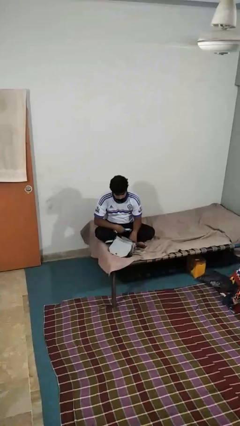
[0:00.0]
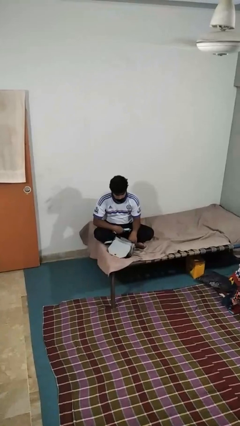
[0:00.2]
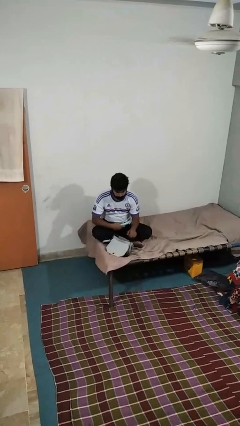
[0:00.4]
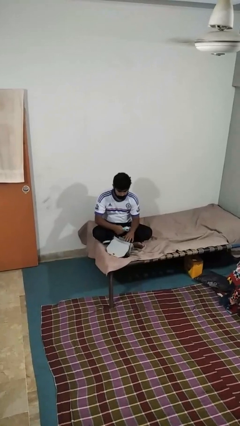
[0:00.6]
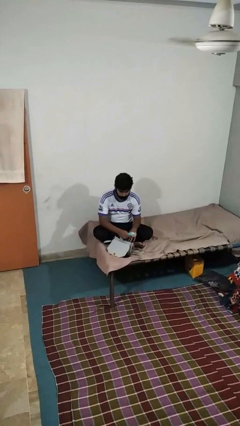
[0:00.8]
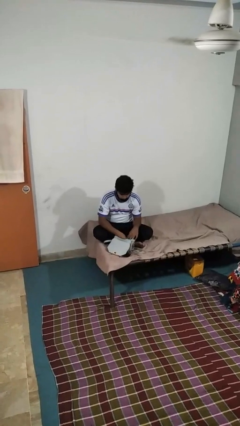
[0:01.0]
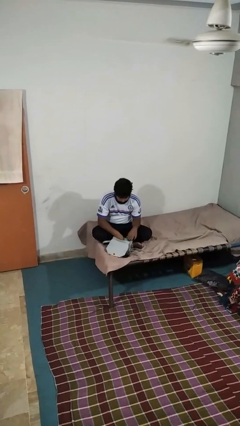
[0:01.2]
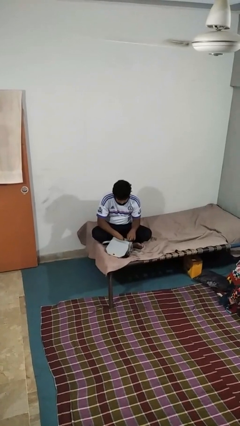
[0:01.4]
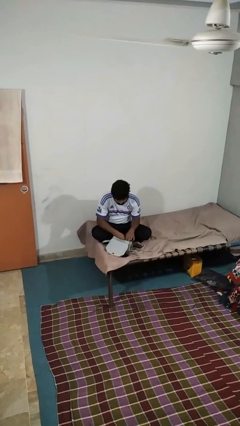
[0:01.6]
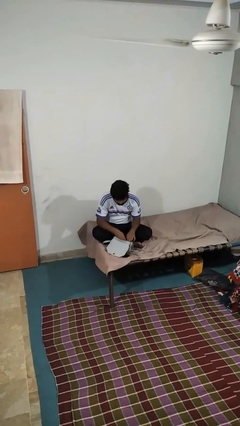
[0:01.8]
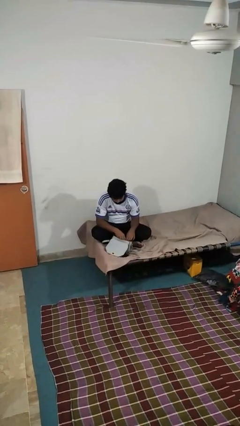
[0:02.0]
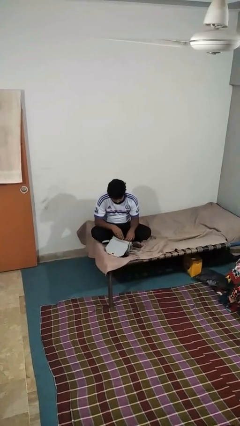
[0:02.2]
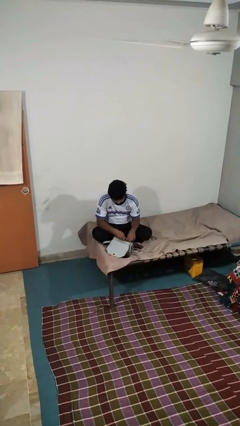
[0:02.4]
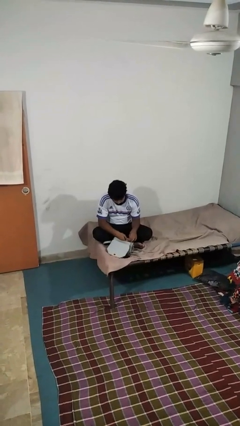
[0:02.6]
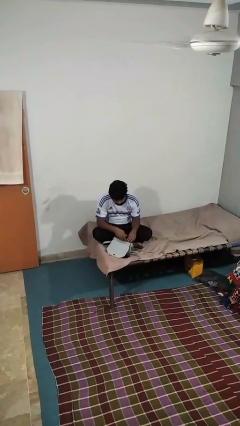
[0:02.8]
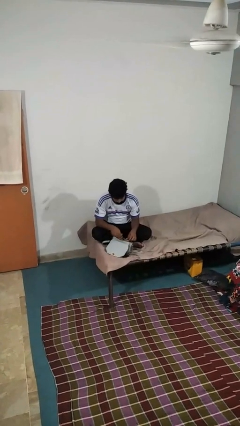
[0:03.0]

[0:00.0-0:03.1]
person puts object into purse

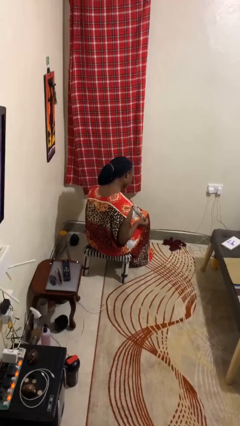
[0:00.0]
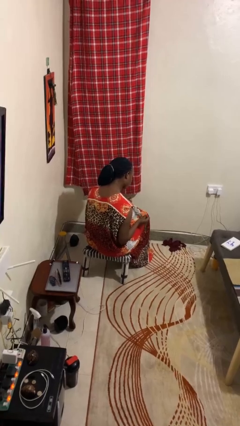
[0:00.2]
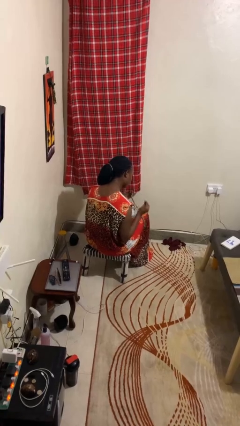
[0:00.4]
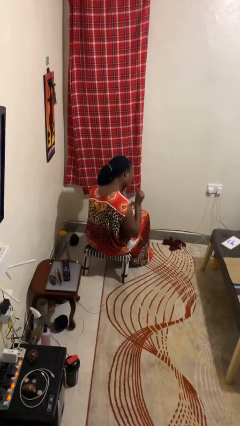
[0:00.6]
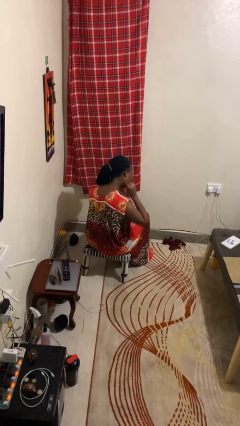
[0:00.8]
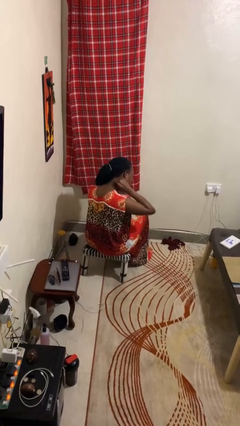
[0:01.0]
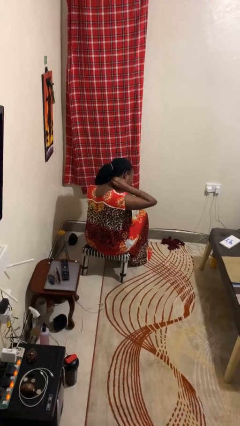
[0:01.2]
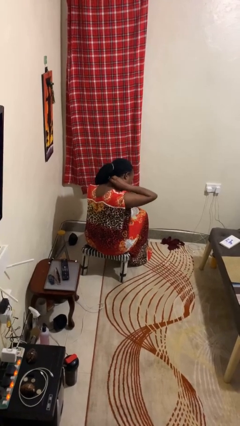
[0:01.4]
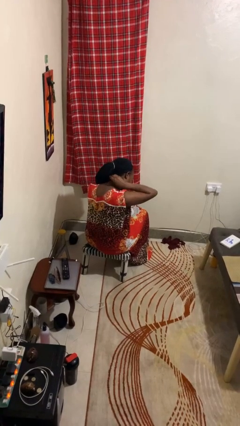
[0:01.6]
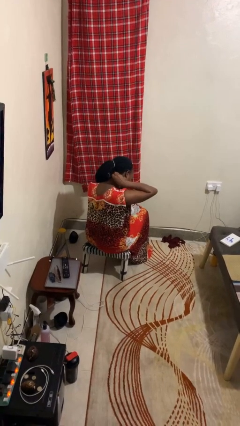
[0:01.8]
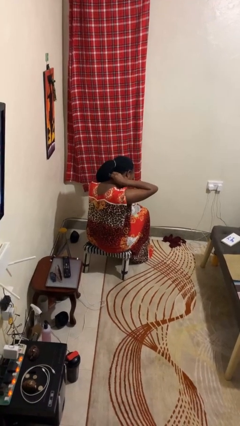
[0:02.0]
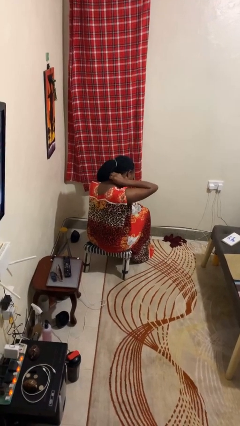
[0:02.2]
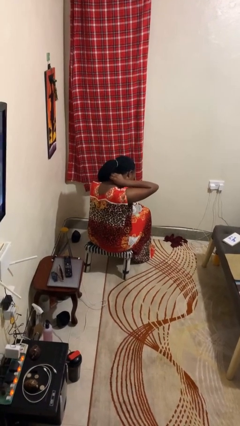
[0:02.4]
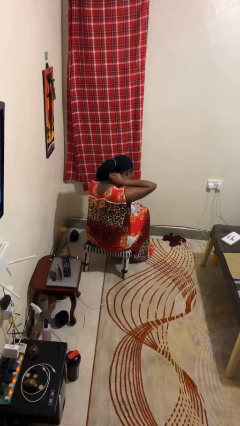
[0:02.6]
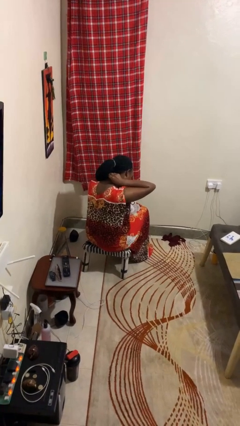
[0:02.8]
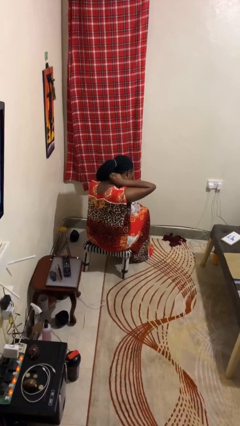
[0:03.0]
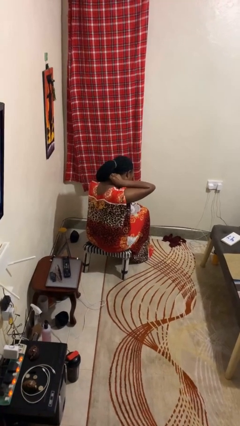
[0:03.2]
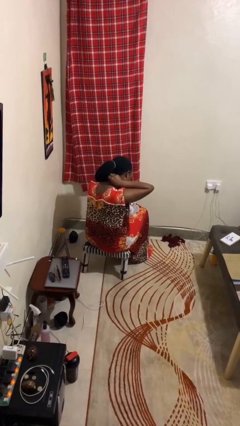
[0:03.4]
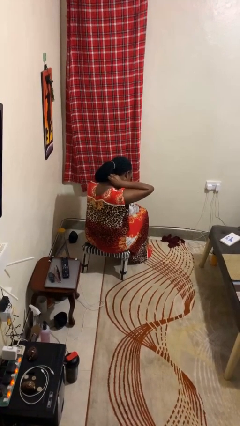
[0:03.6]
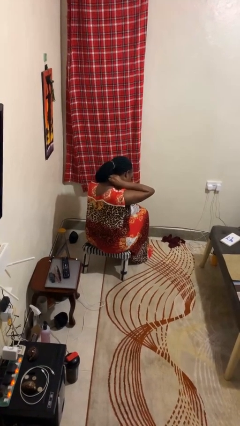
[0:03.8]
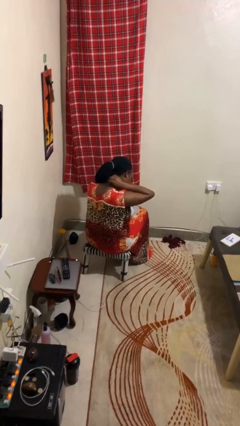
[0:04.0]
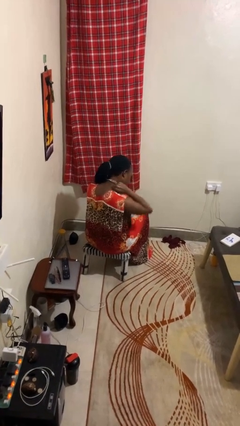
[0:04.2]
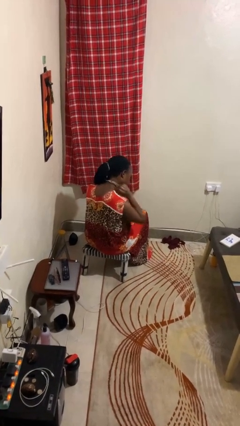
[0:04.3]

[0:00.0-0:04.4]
person puts on necklace

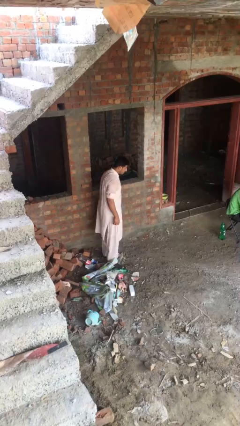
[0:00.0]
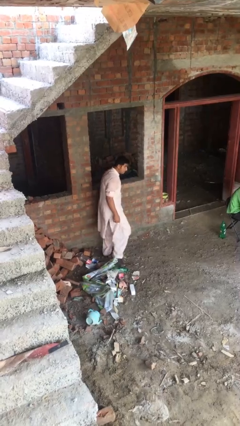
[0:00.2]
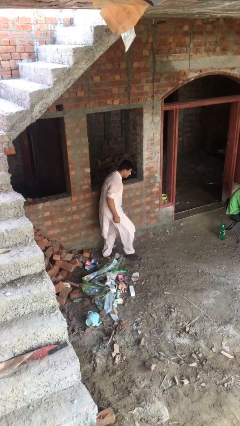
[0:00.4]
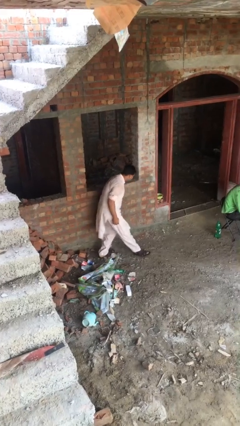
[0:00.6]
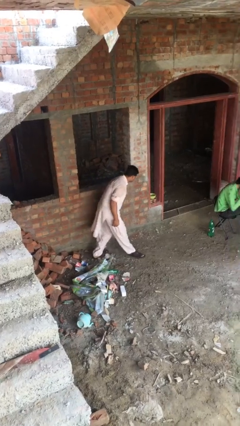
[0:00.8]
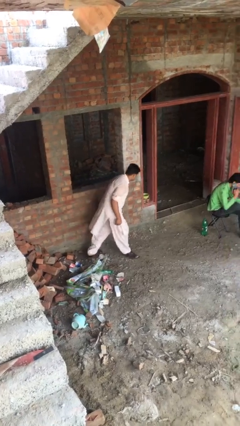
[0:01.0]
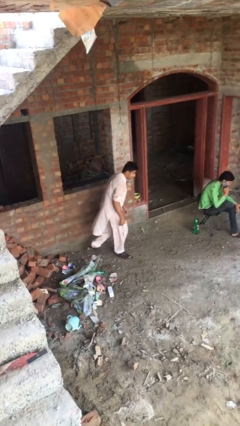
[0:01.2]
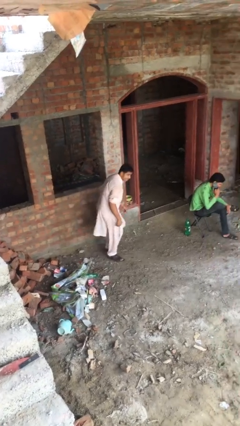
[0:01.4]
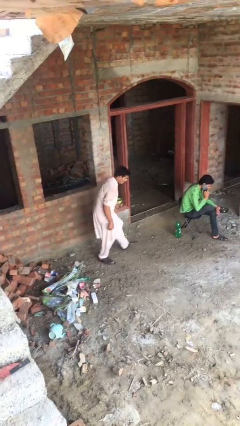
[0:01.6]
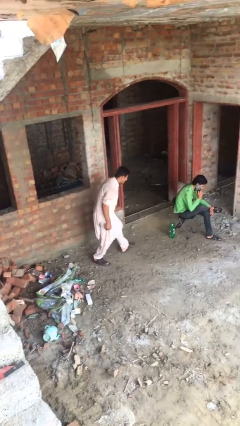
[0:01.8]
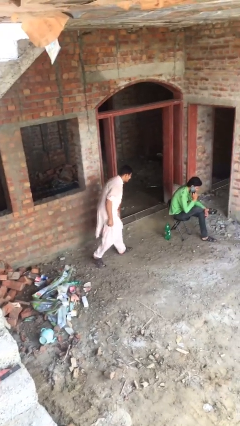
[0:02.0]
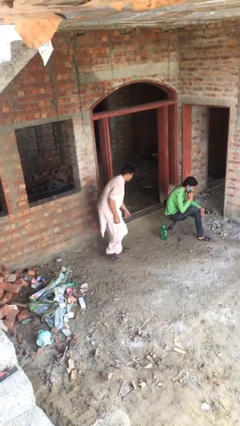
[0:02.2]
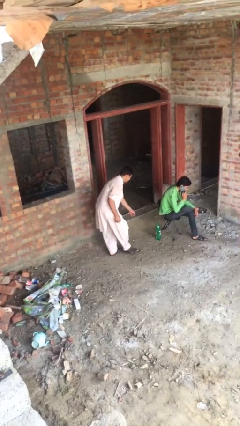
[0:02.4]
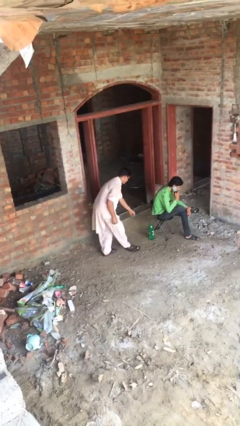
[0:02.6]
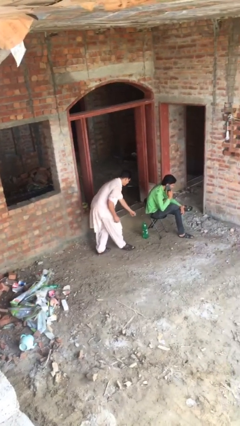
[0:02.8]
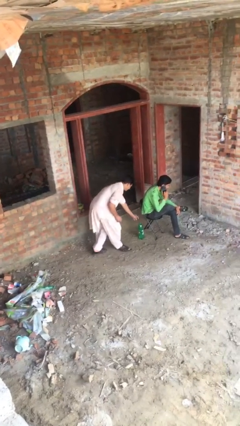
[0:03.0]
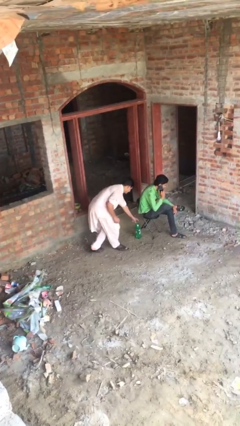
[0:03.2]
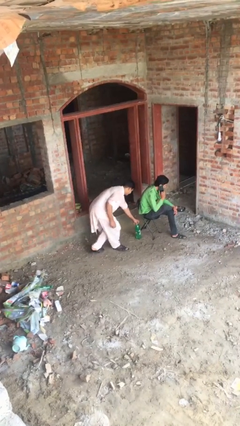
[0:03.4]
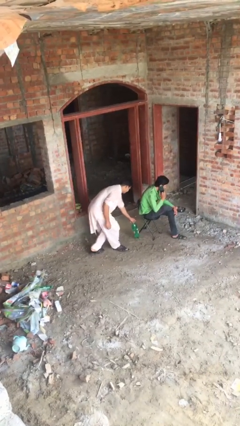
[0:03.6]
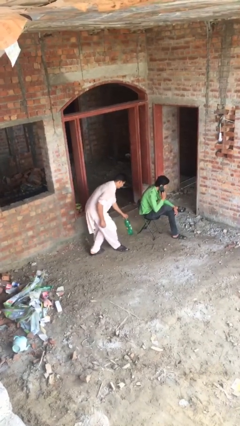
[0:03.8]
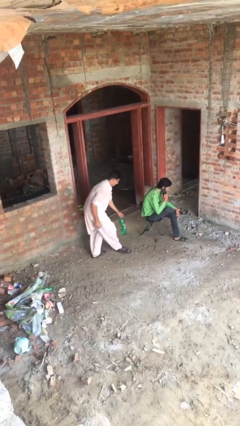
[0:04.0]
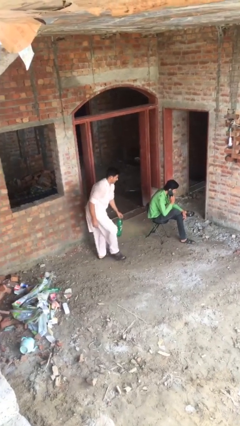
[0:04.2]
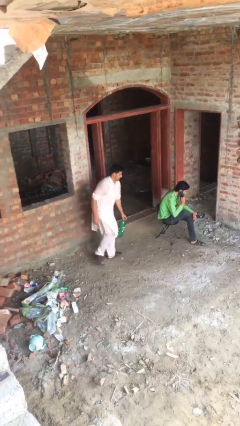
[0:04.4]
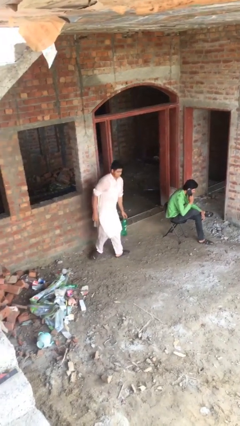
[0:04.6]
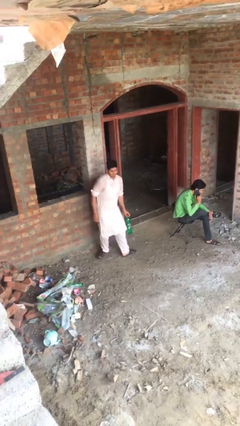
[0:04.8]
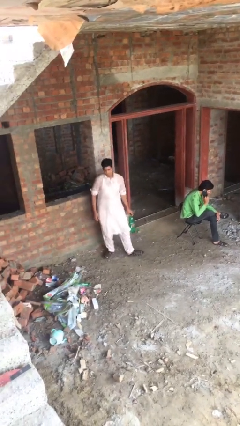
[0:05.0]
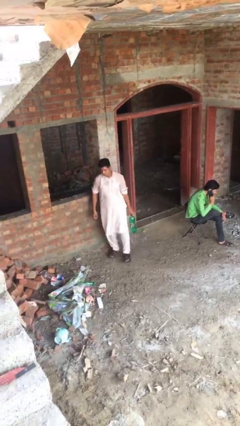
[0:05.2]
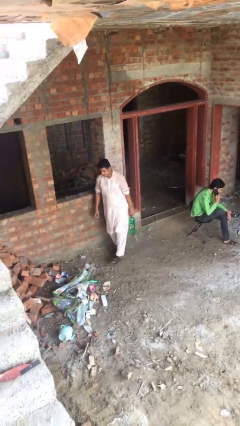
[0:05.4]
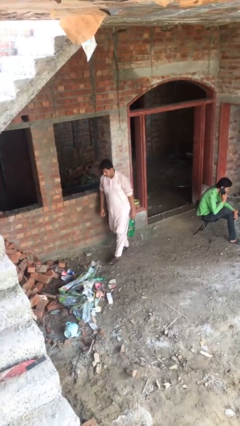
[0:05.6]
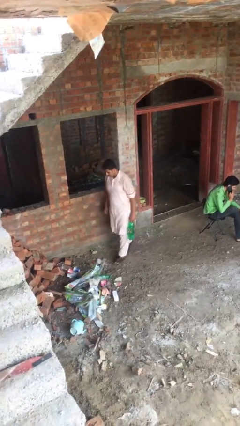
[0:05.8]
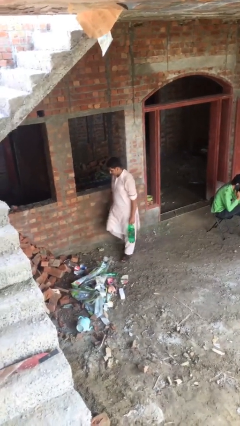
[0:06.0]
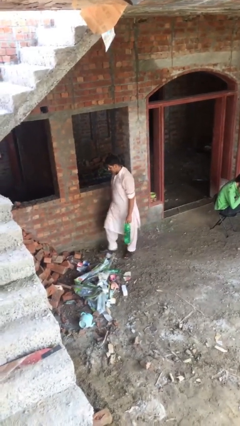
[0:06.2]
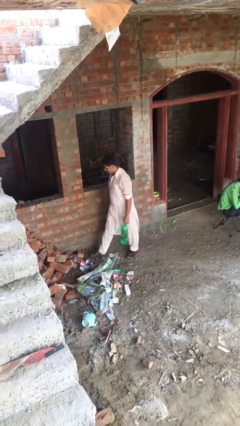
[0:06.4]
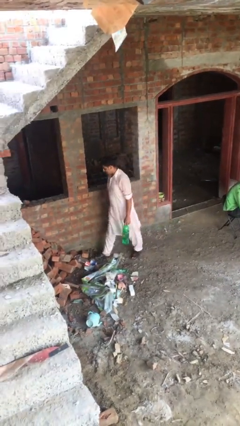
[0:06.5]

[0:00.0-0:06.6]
person steals object from person

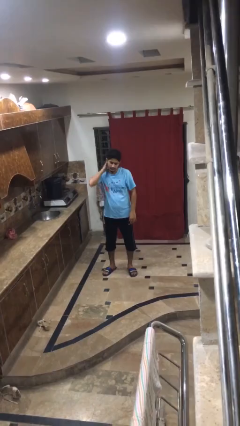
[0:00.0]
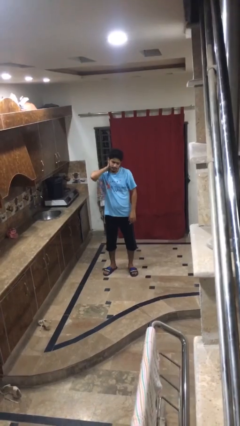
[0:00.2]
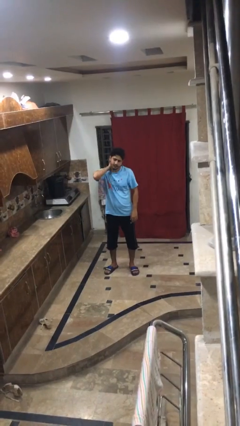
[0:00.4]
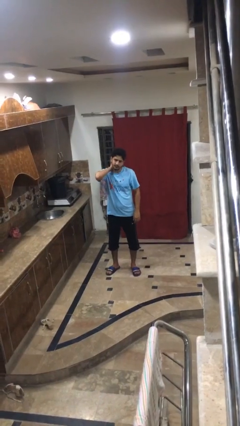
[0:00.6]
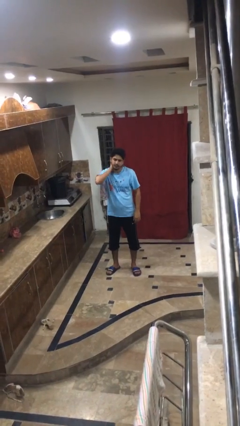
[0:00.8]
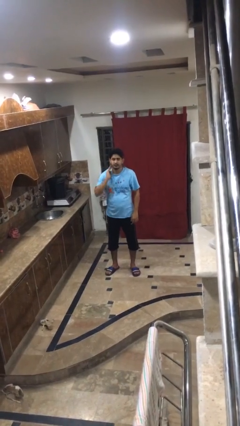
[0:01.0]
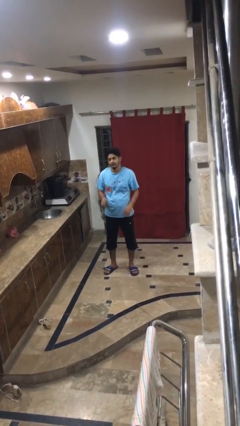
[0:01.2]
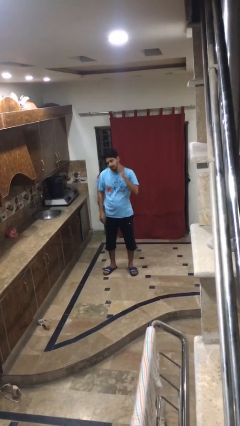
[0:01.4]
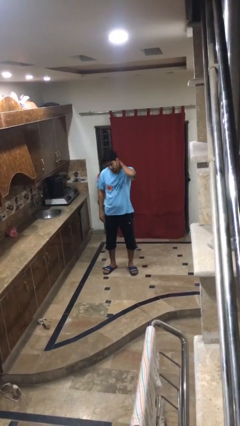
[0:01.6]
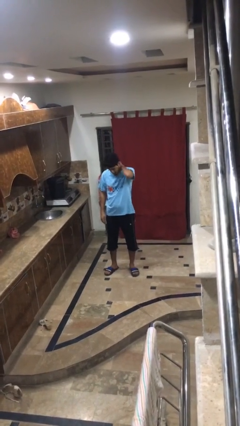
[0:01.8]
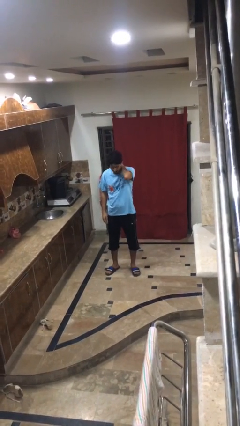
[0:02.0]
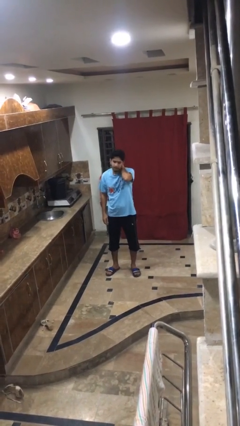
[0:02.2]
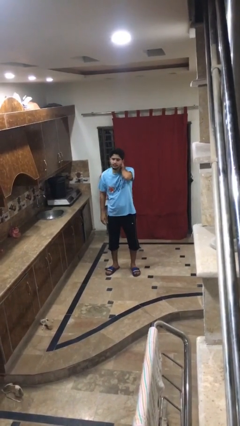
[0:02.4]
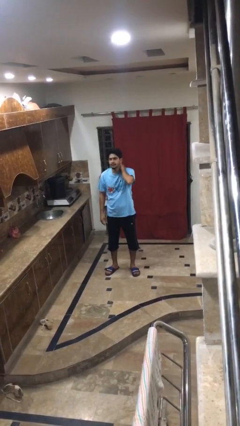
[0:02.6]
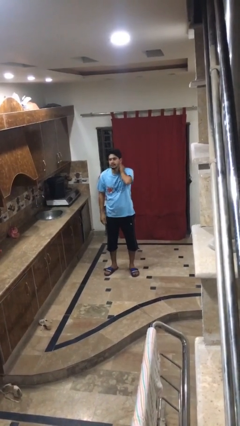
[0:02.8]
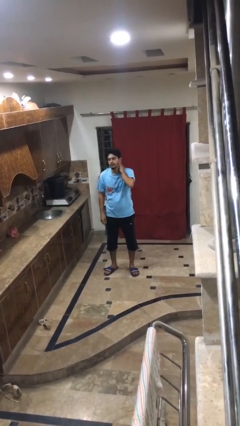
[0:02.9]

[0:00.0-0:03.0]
person rubs neck

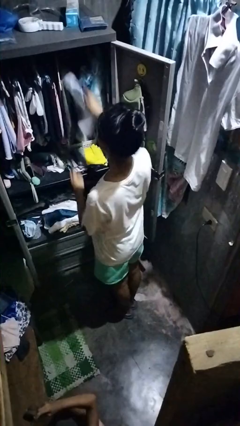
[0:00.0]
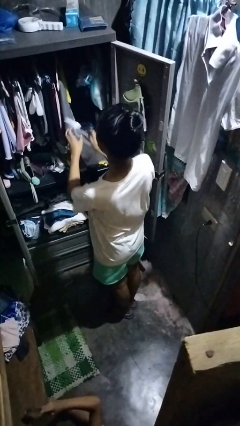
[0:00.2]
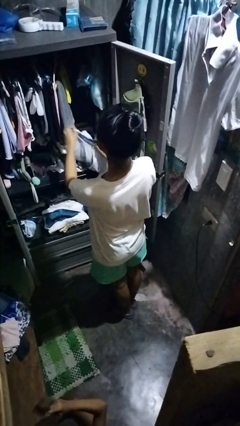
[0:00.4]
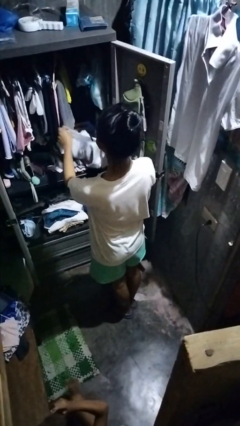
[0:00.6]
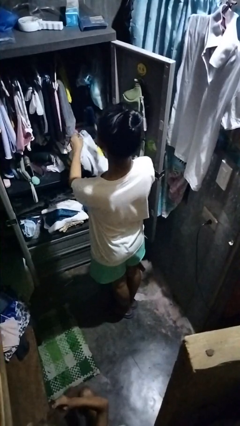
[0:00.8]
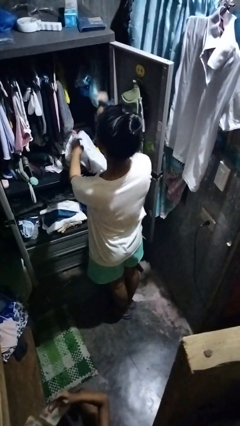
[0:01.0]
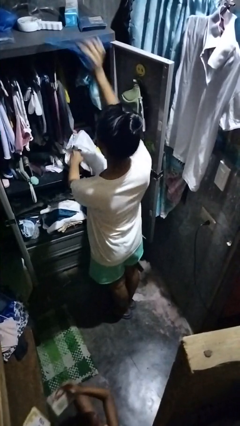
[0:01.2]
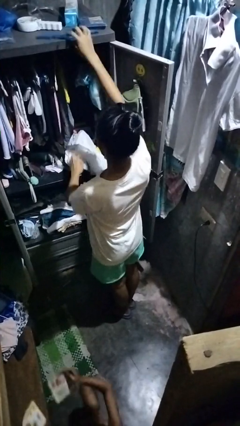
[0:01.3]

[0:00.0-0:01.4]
person takes clothes from closet
